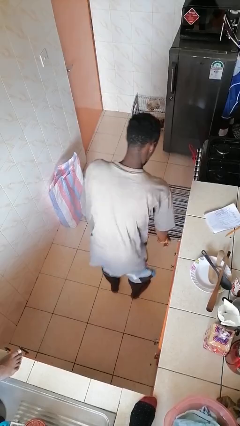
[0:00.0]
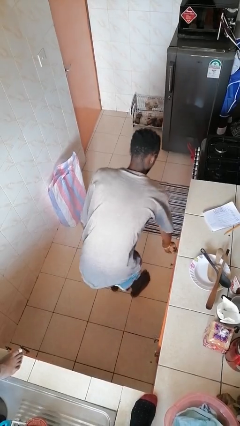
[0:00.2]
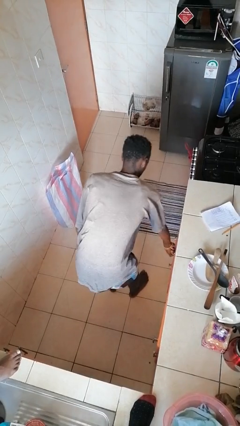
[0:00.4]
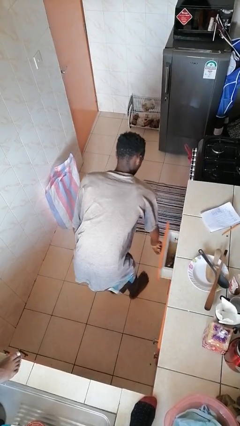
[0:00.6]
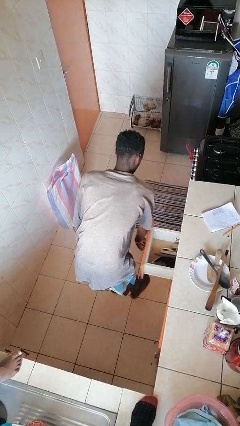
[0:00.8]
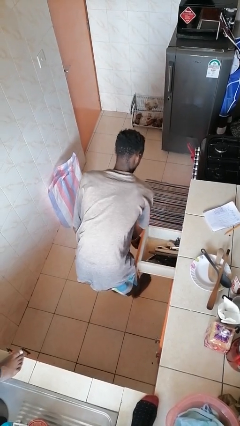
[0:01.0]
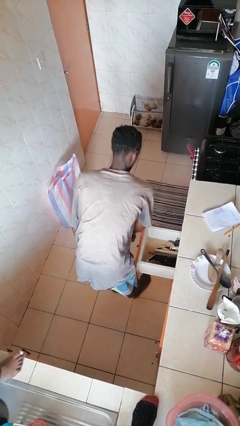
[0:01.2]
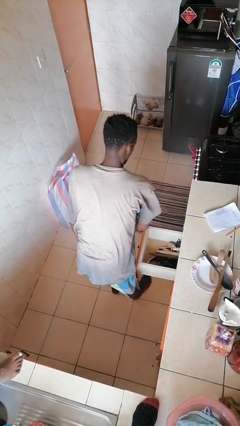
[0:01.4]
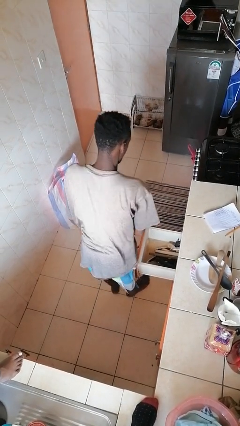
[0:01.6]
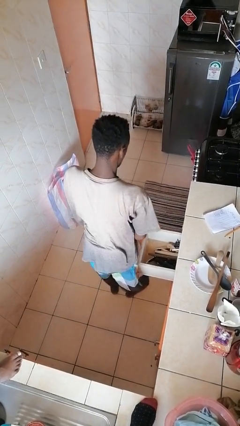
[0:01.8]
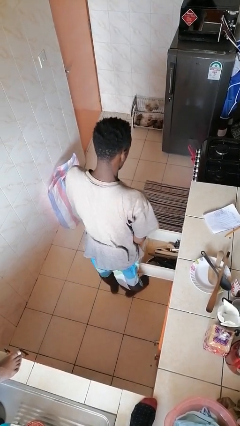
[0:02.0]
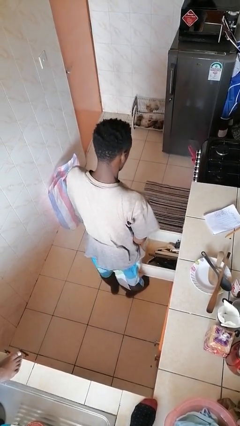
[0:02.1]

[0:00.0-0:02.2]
person opens kitchen drawer

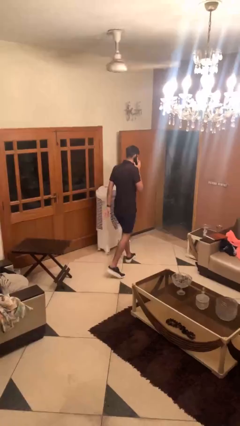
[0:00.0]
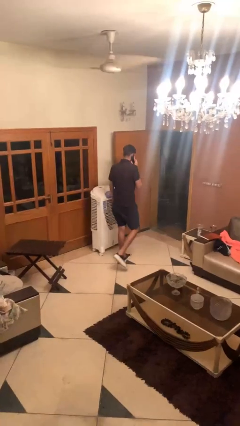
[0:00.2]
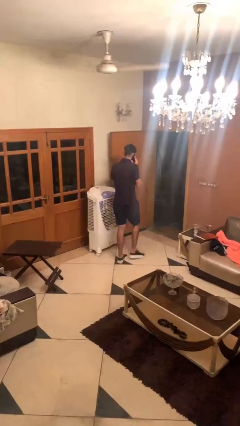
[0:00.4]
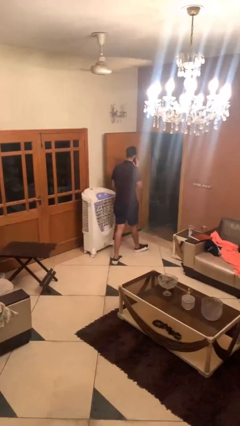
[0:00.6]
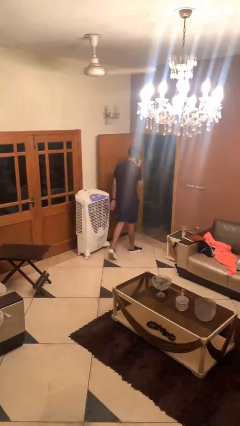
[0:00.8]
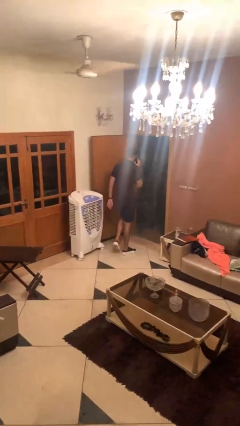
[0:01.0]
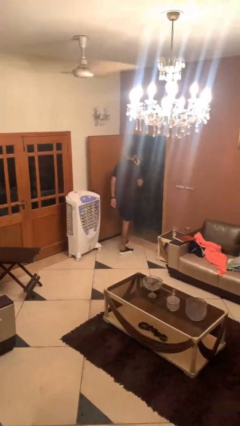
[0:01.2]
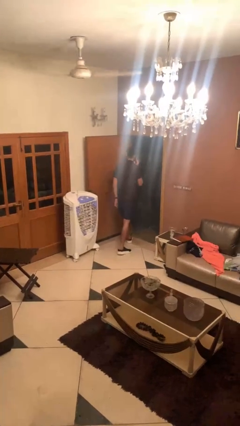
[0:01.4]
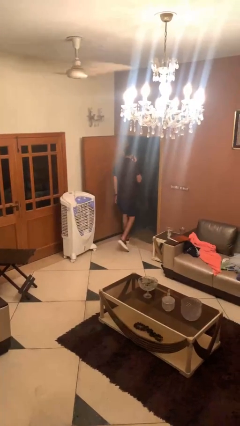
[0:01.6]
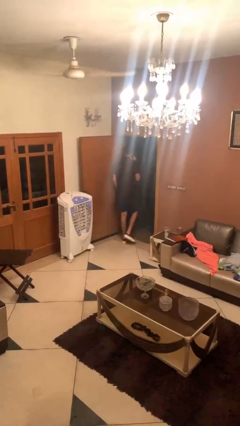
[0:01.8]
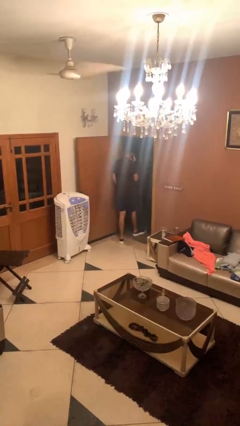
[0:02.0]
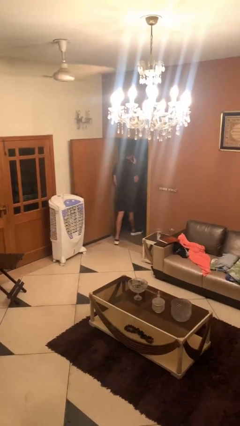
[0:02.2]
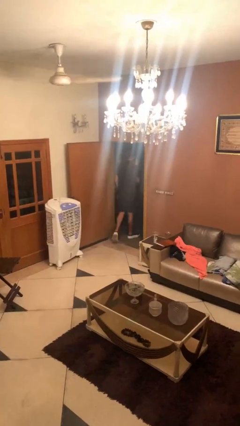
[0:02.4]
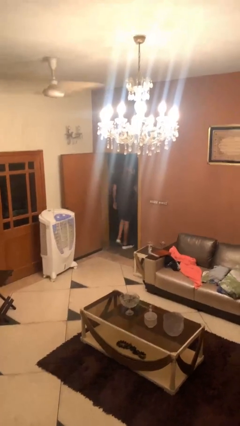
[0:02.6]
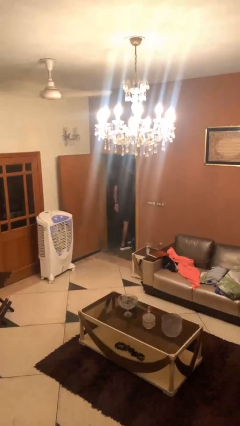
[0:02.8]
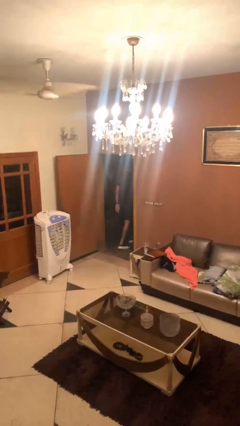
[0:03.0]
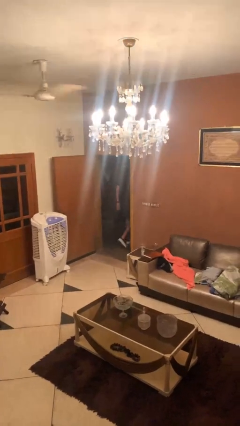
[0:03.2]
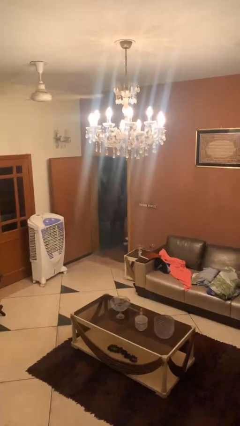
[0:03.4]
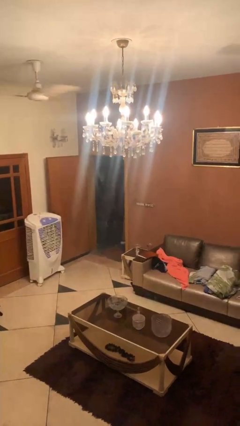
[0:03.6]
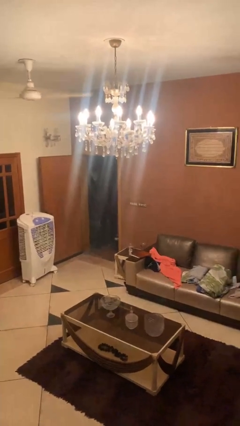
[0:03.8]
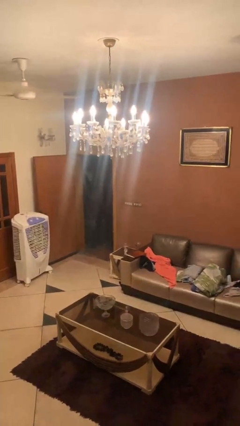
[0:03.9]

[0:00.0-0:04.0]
person exits scene through structure

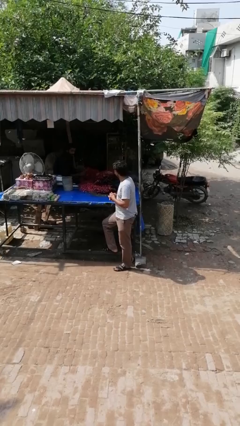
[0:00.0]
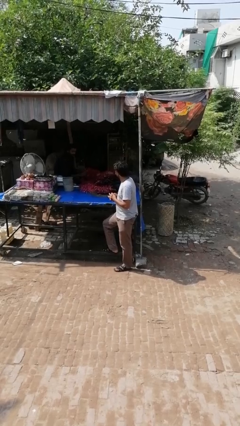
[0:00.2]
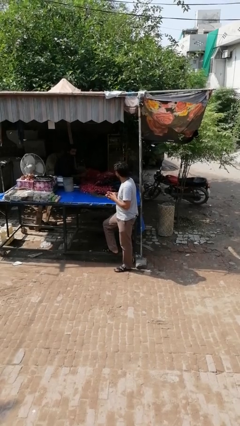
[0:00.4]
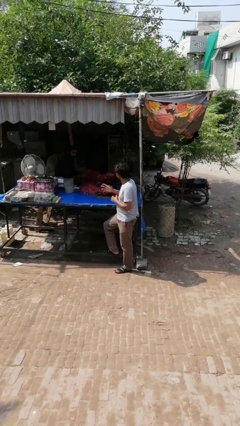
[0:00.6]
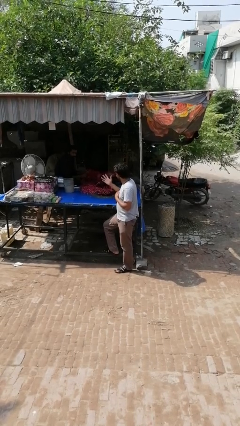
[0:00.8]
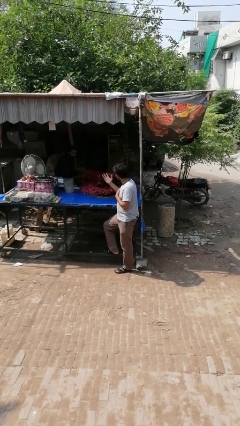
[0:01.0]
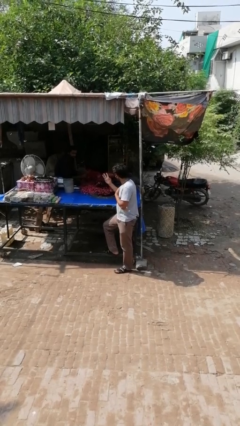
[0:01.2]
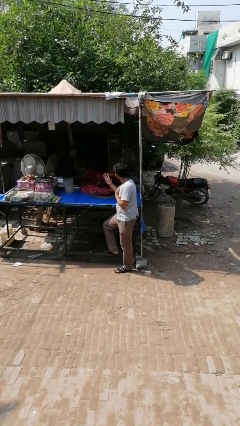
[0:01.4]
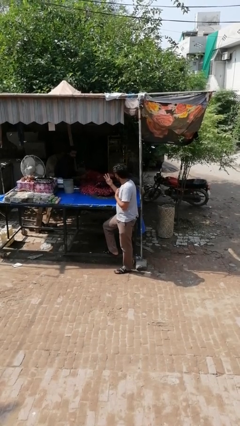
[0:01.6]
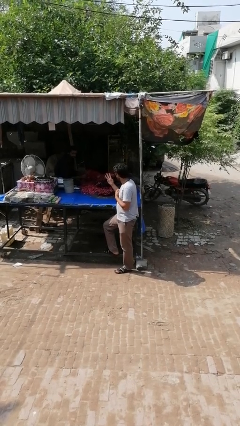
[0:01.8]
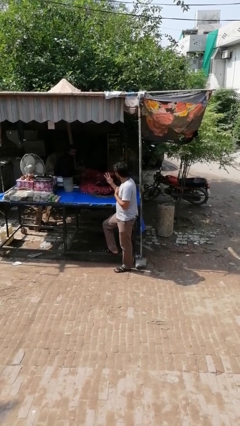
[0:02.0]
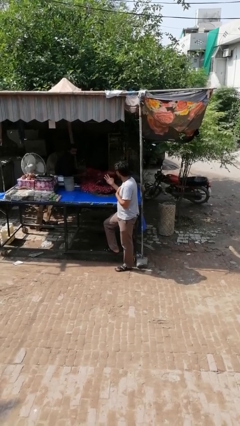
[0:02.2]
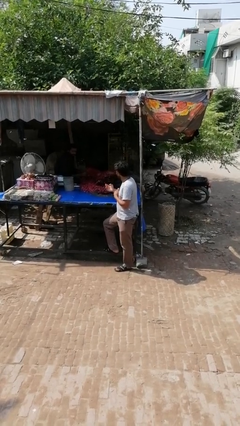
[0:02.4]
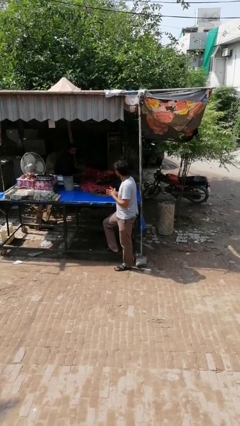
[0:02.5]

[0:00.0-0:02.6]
person talks to person

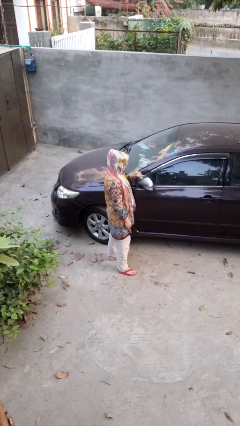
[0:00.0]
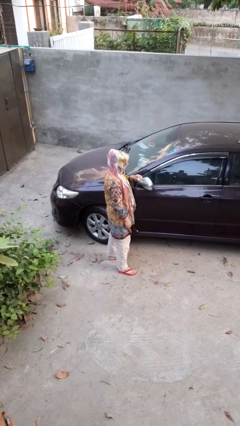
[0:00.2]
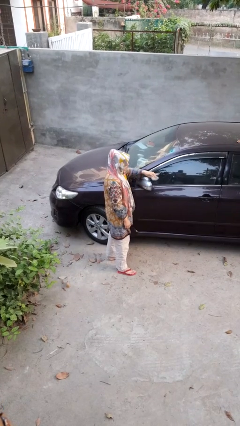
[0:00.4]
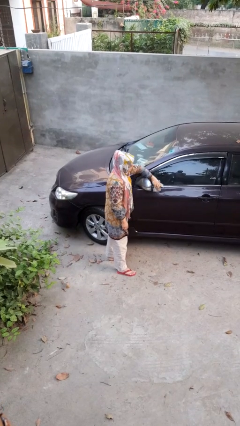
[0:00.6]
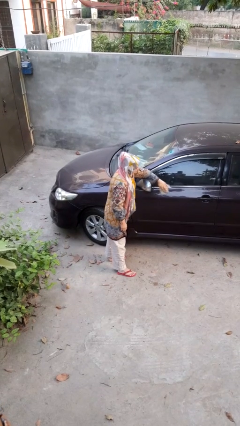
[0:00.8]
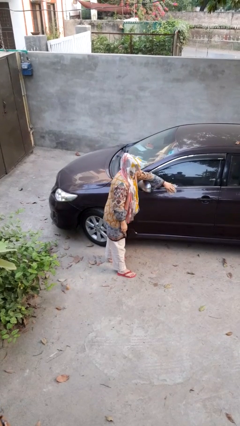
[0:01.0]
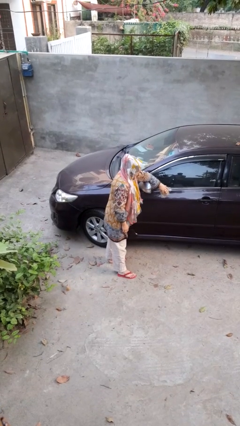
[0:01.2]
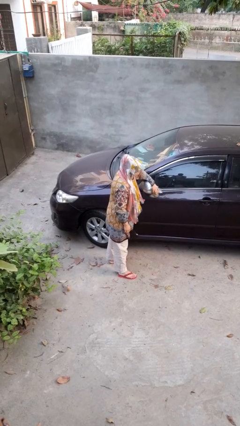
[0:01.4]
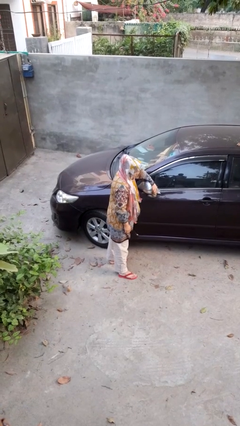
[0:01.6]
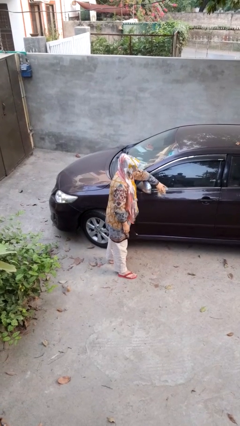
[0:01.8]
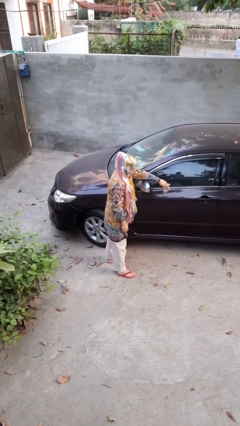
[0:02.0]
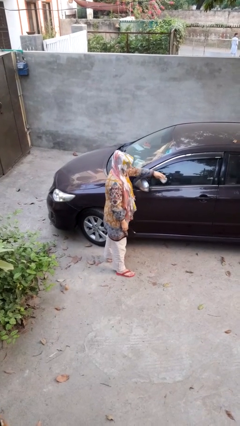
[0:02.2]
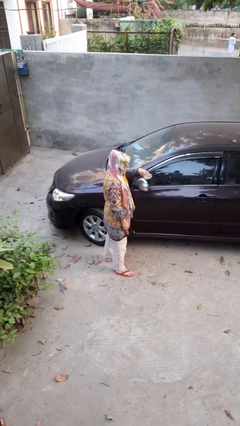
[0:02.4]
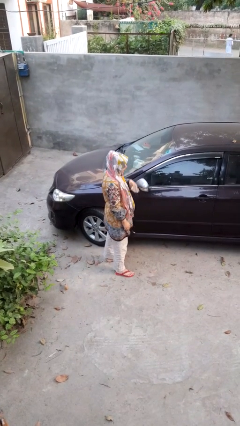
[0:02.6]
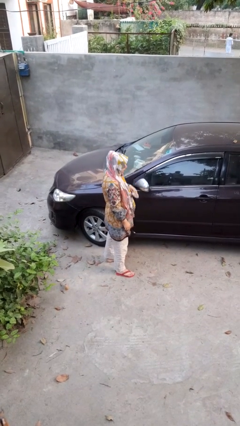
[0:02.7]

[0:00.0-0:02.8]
person polishes car with rag

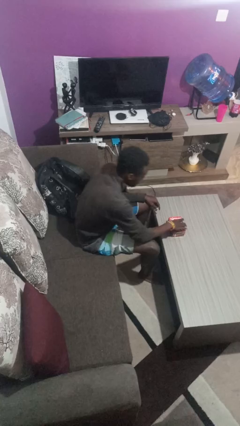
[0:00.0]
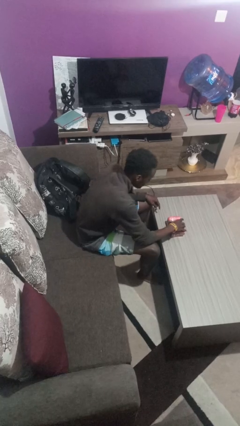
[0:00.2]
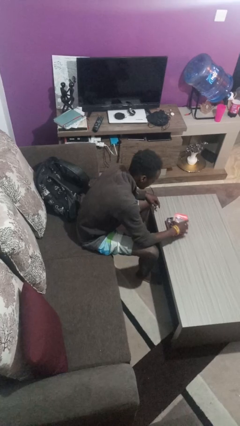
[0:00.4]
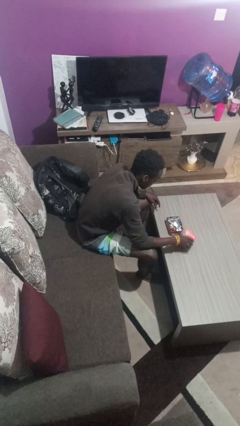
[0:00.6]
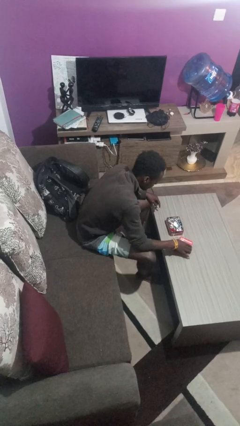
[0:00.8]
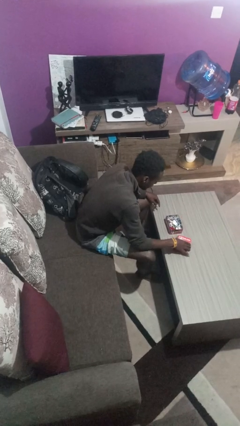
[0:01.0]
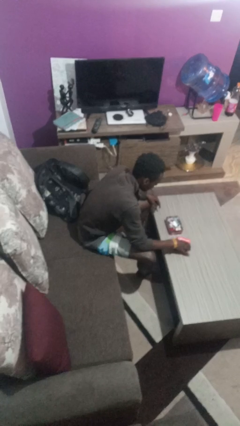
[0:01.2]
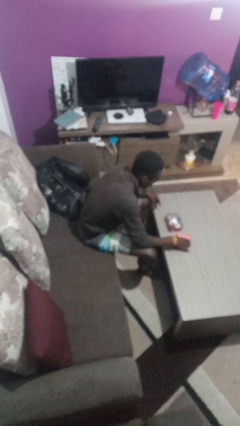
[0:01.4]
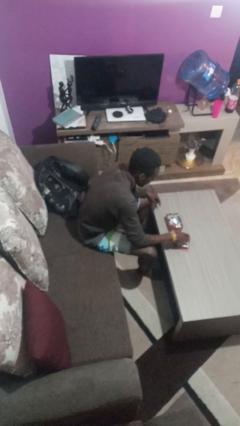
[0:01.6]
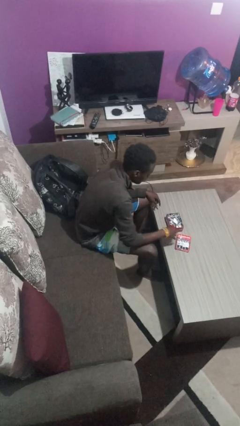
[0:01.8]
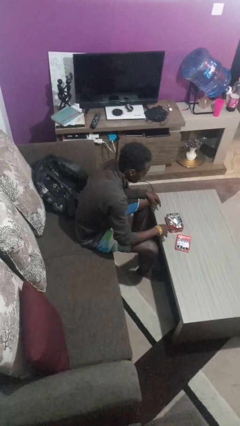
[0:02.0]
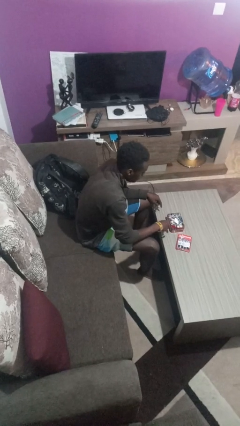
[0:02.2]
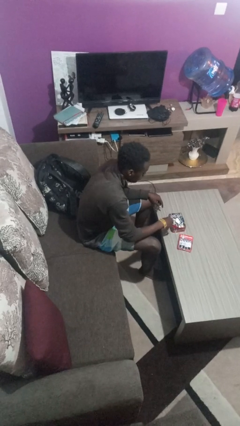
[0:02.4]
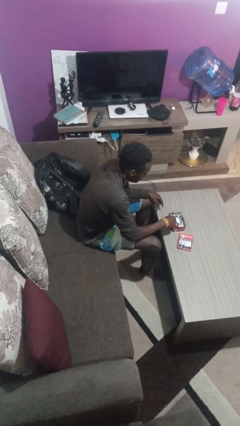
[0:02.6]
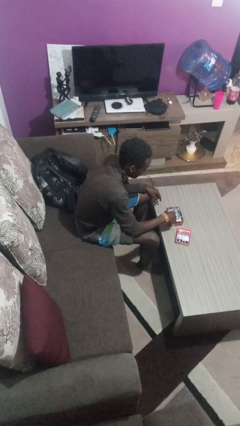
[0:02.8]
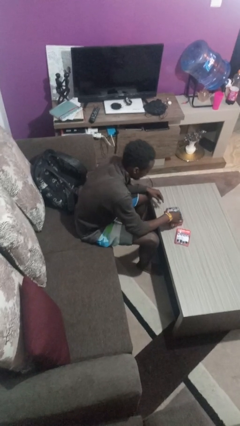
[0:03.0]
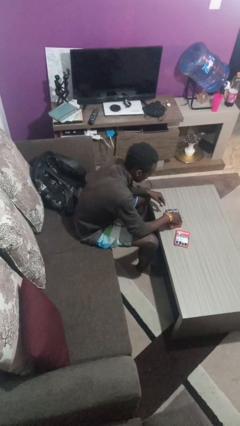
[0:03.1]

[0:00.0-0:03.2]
person opens jewelry box

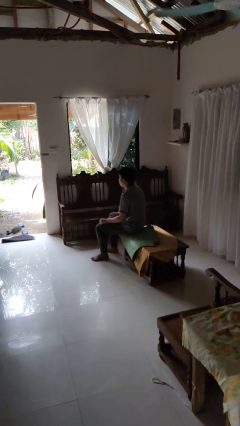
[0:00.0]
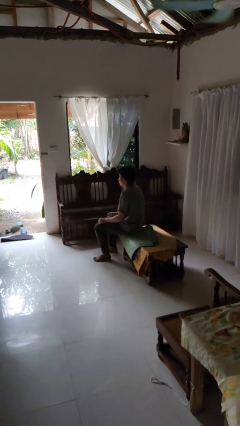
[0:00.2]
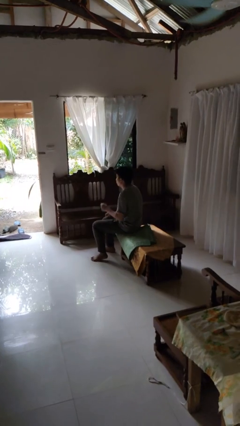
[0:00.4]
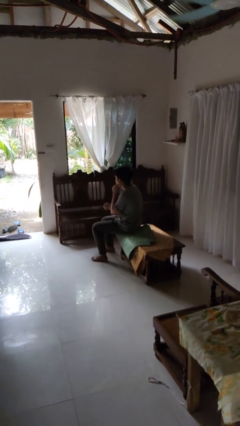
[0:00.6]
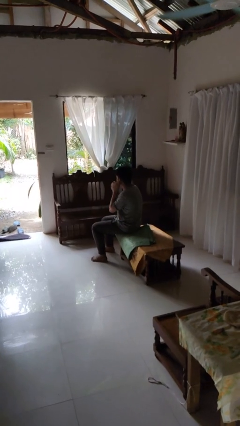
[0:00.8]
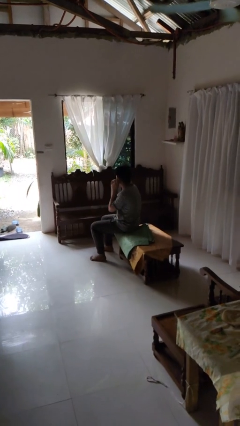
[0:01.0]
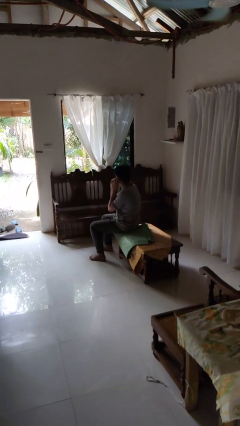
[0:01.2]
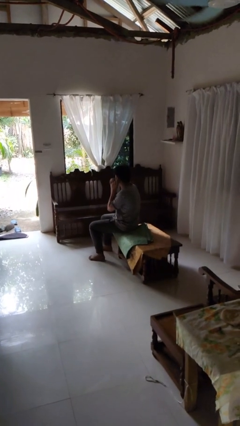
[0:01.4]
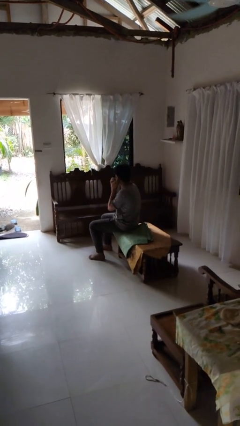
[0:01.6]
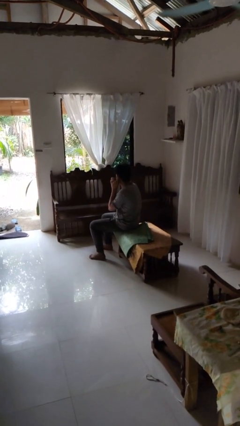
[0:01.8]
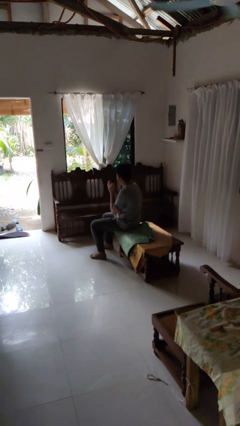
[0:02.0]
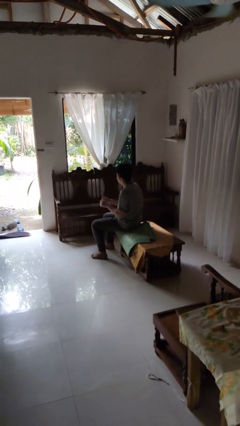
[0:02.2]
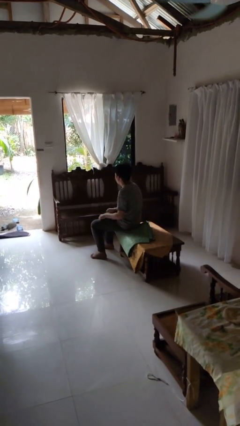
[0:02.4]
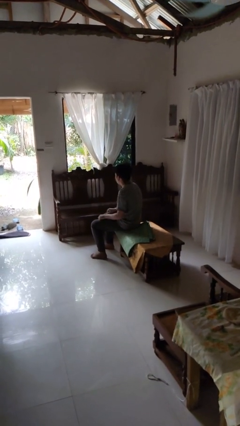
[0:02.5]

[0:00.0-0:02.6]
person takes off earrings
